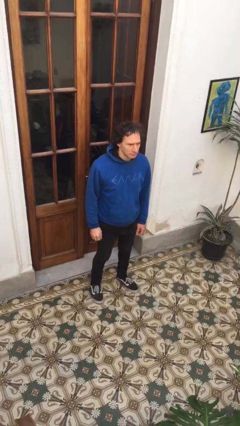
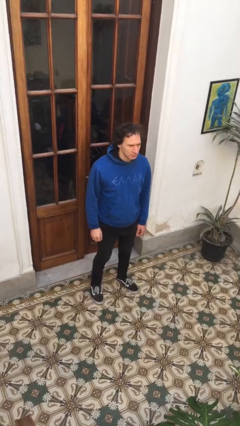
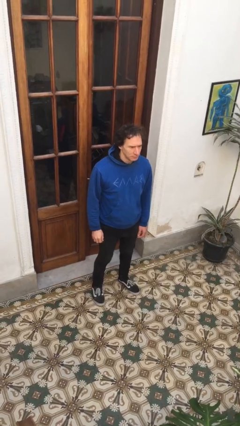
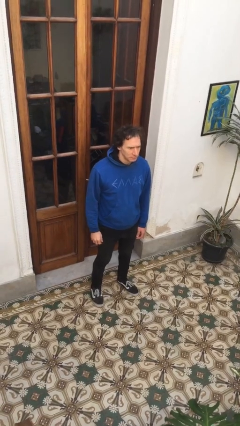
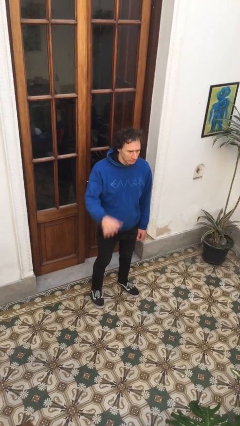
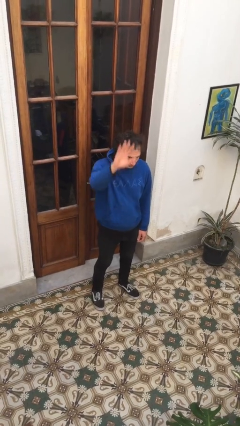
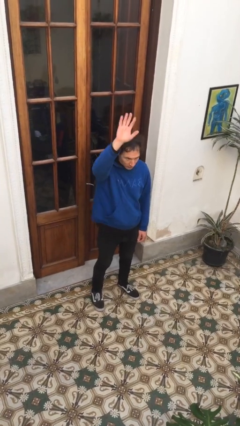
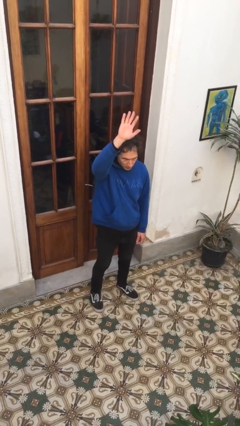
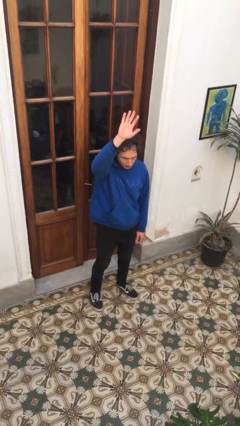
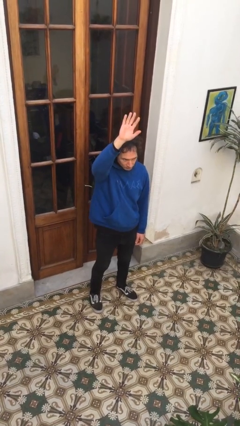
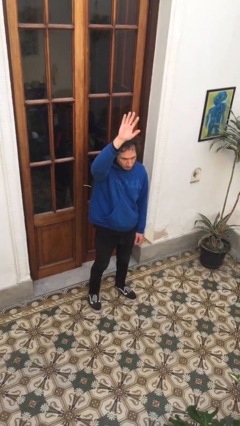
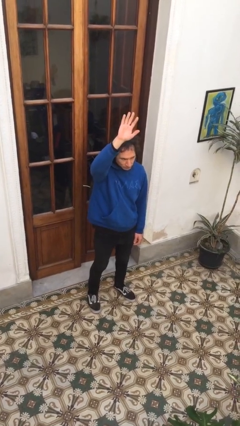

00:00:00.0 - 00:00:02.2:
person gestures raise hand

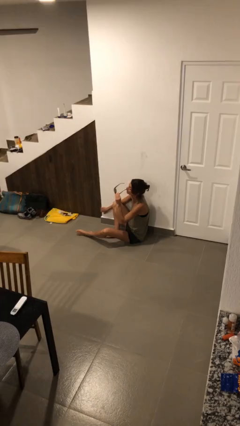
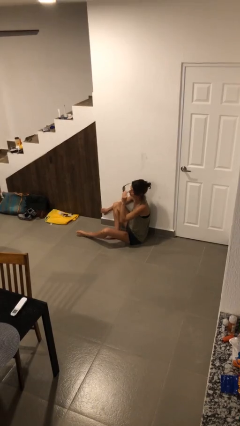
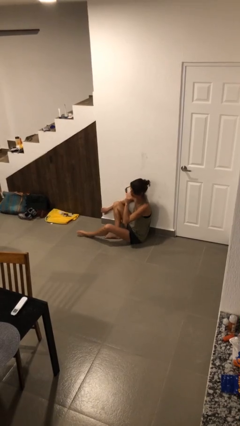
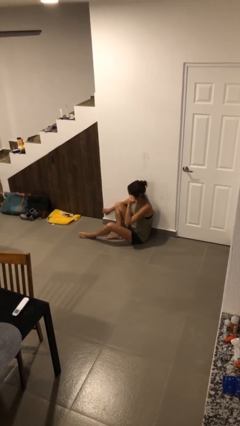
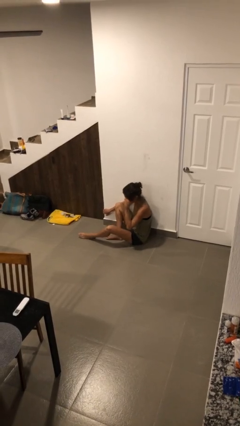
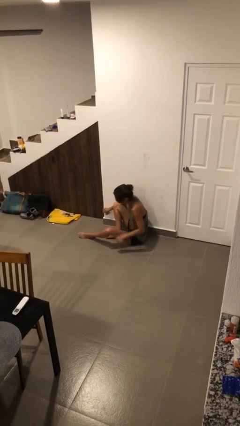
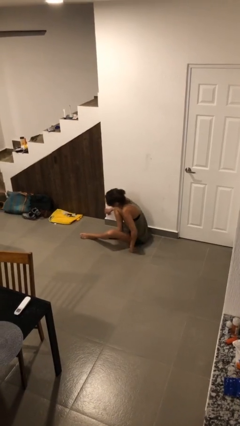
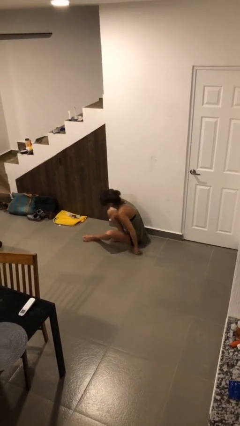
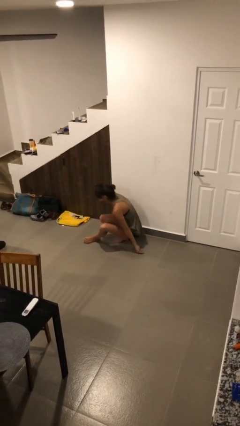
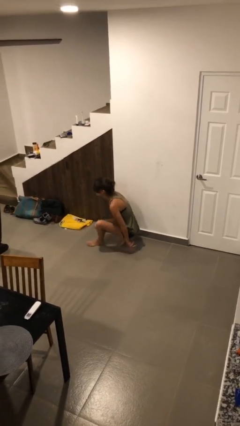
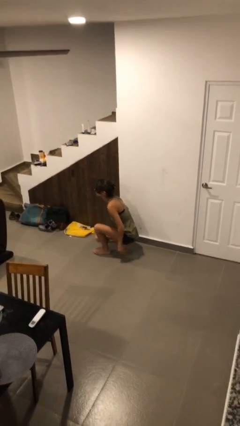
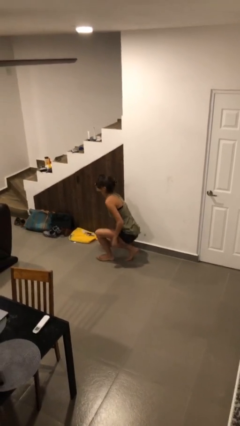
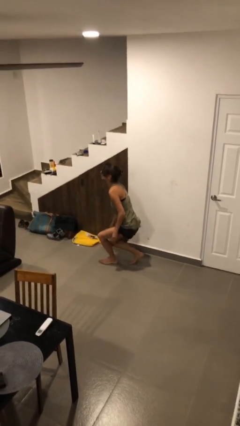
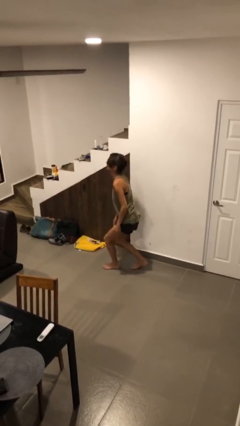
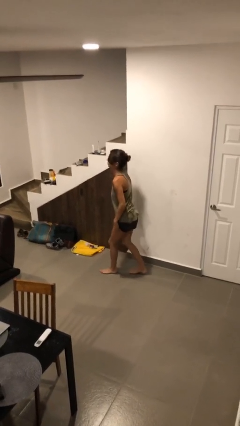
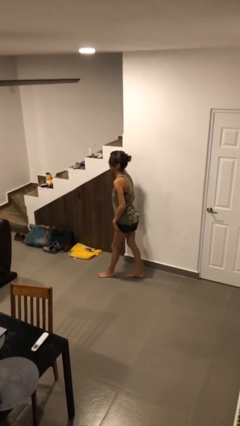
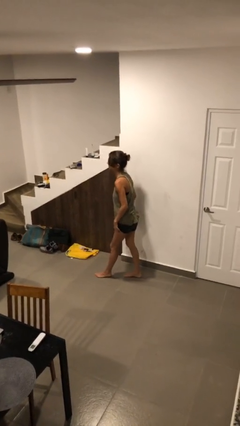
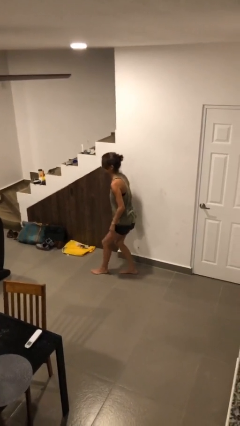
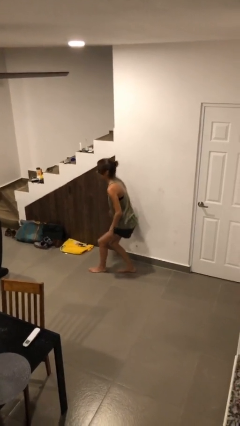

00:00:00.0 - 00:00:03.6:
person stands up

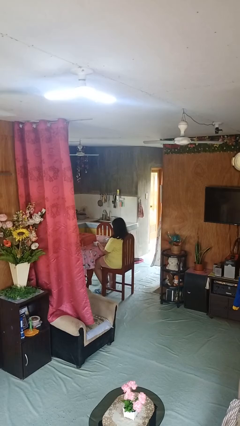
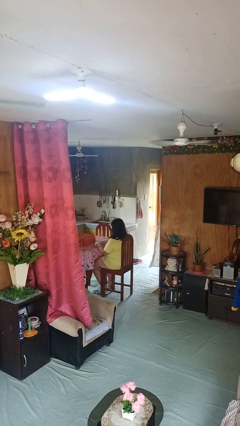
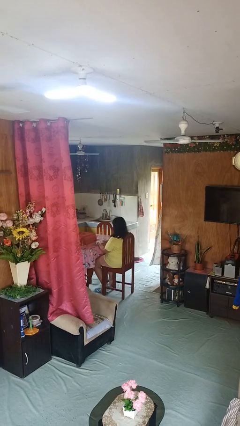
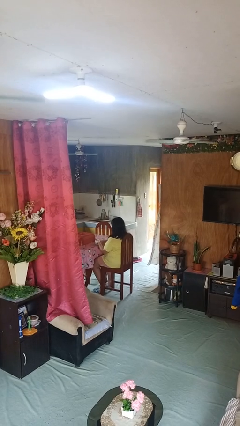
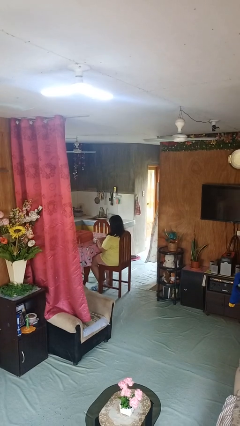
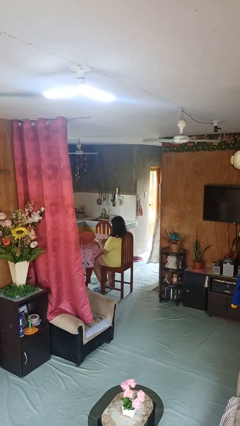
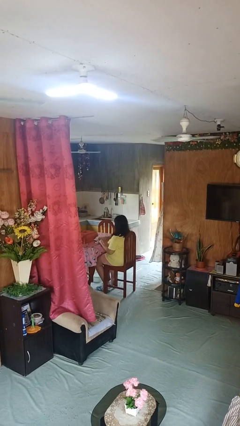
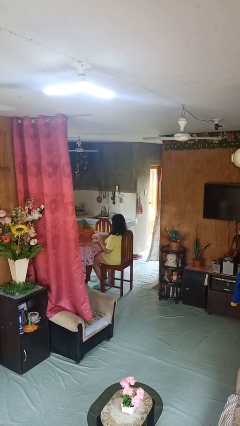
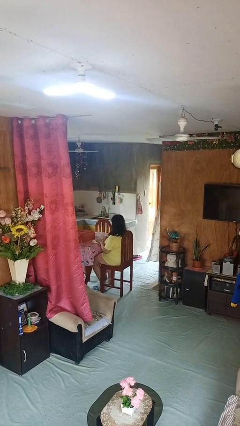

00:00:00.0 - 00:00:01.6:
person takes off gloves

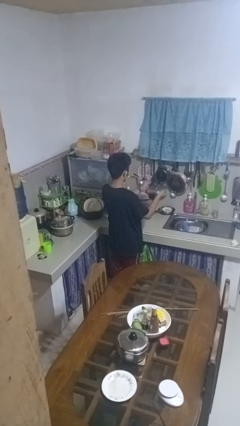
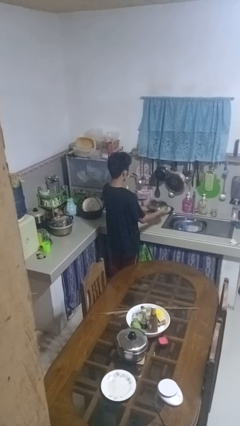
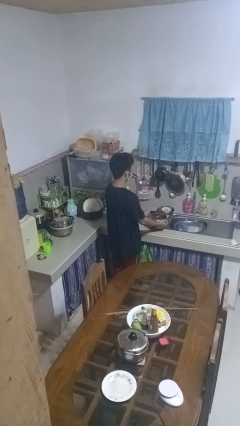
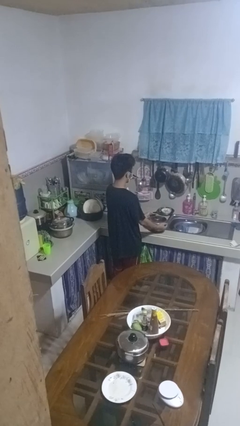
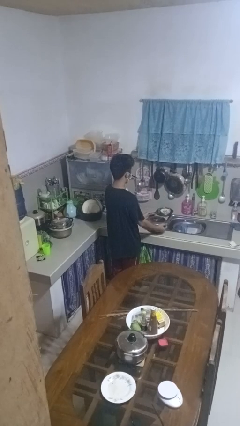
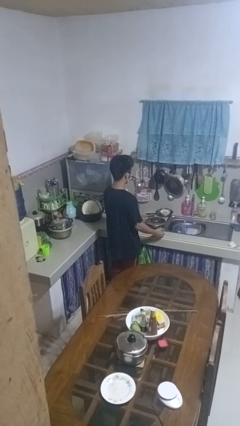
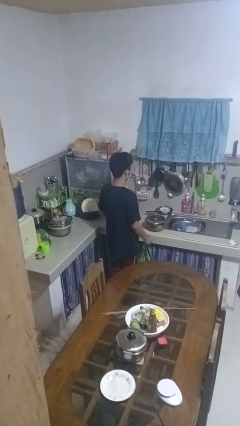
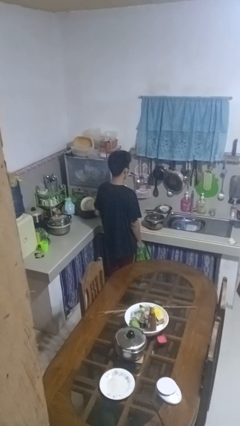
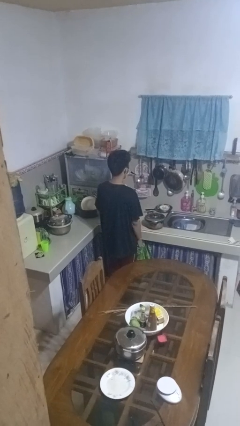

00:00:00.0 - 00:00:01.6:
person puts down object on countertop

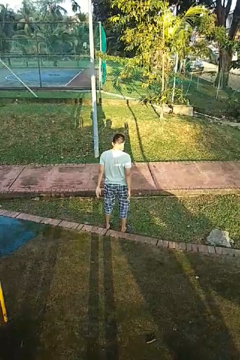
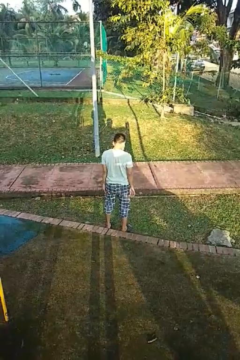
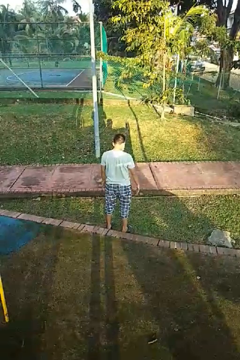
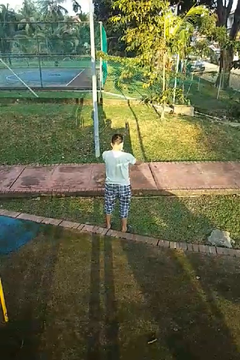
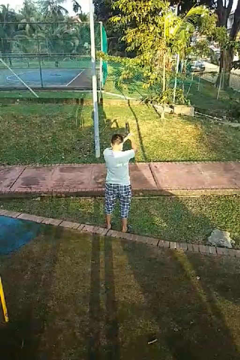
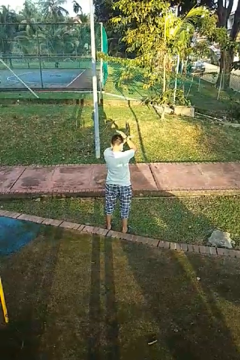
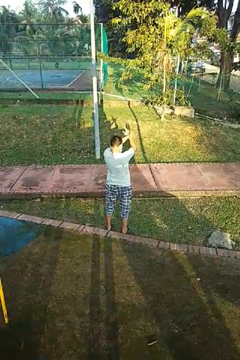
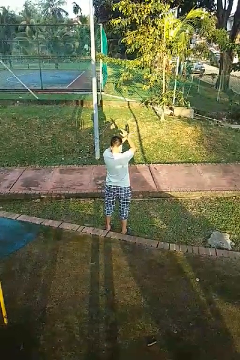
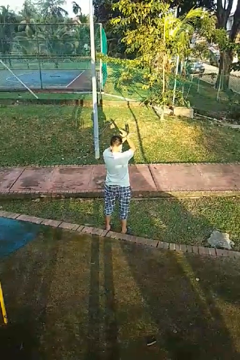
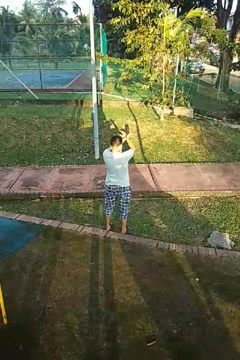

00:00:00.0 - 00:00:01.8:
person gestures arms x

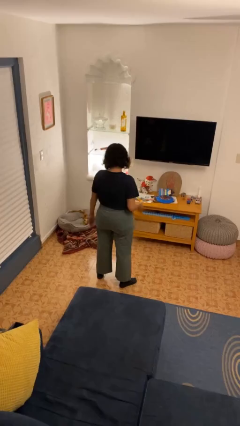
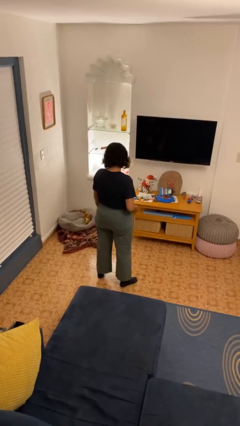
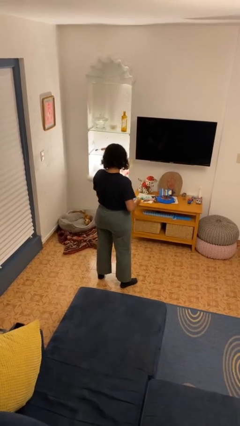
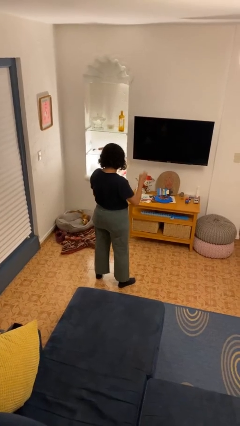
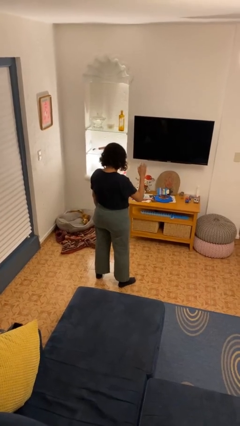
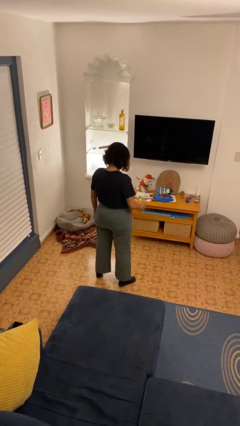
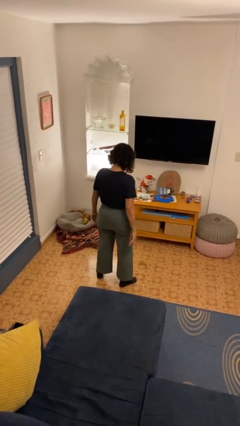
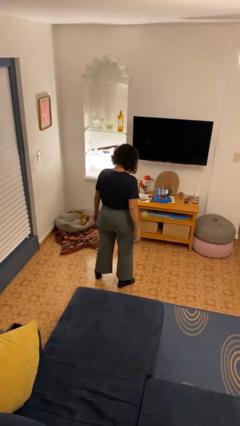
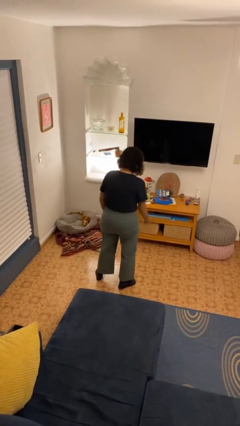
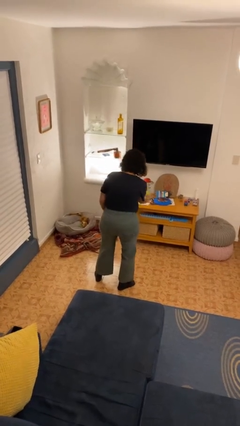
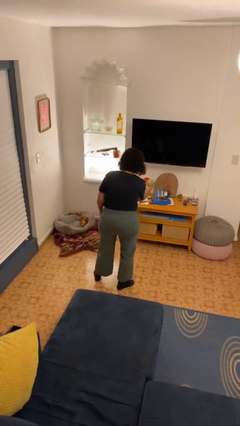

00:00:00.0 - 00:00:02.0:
person bounces ball on floor

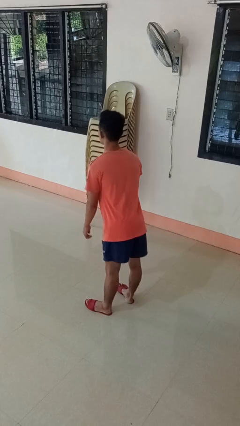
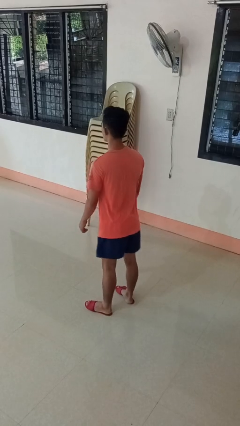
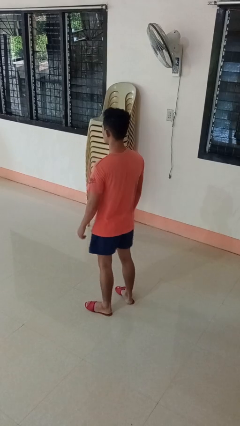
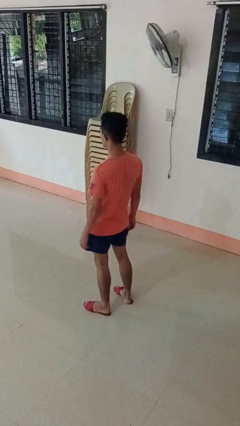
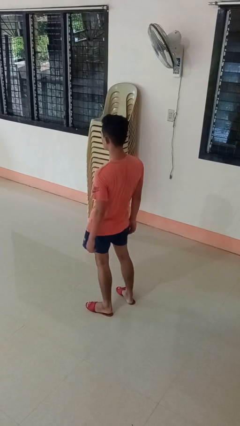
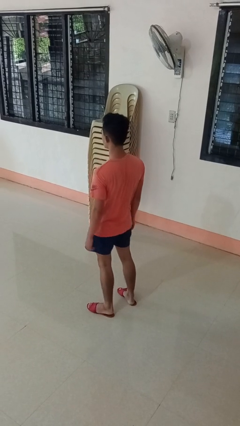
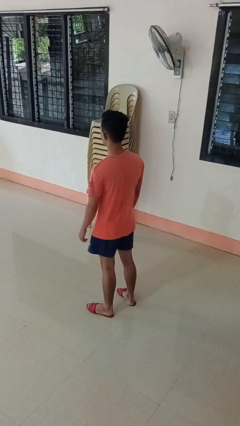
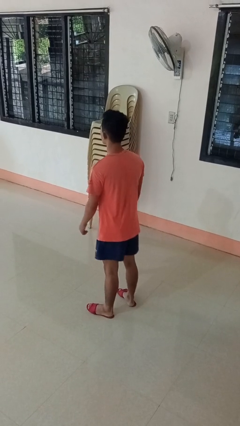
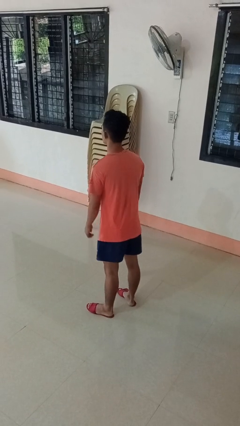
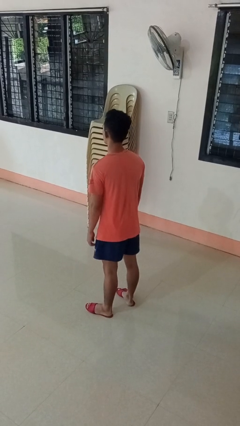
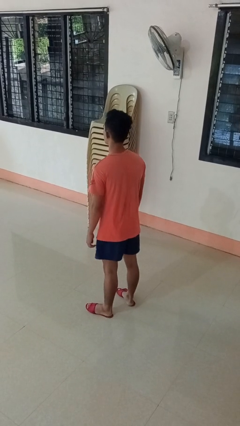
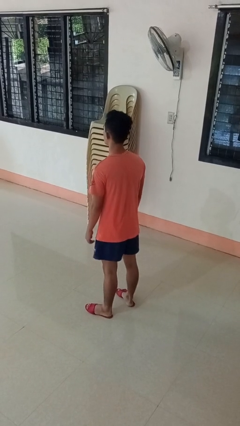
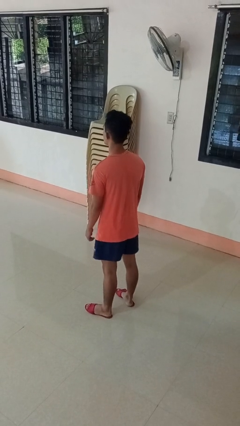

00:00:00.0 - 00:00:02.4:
person wiggles hips

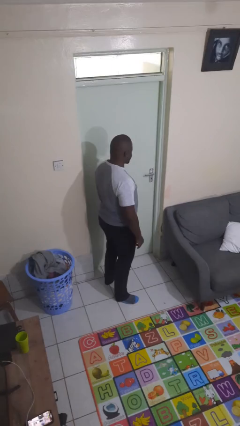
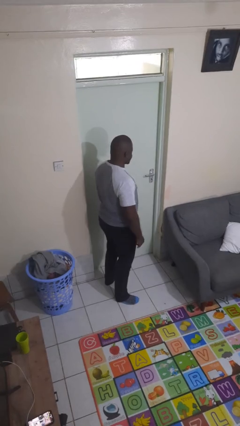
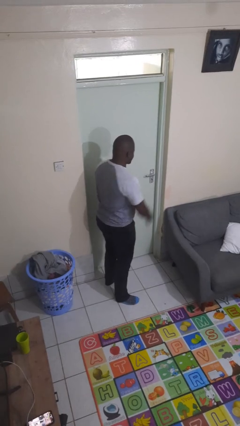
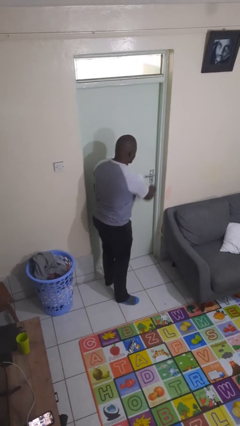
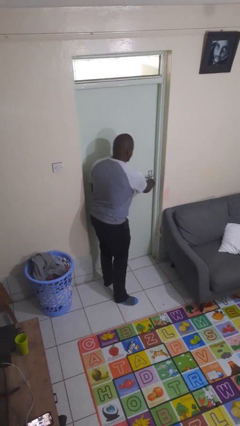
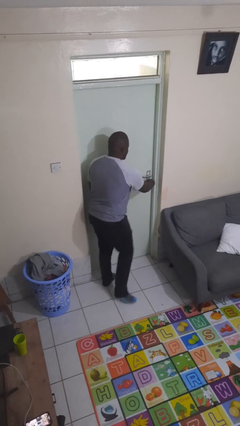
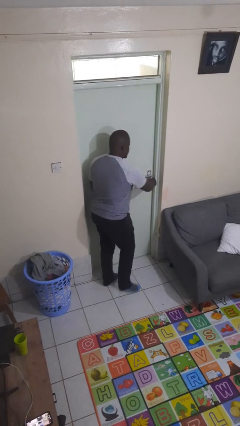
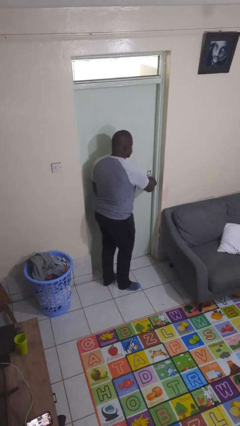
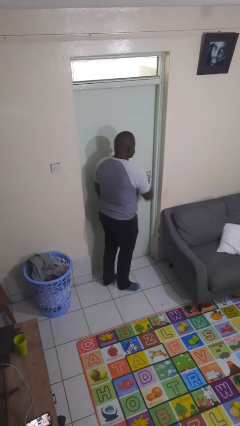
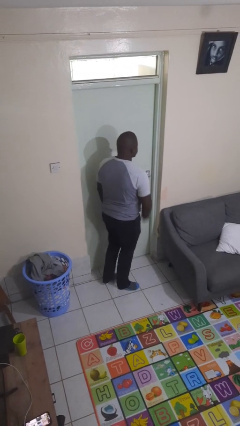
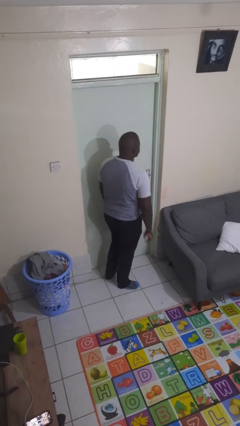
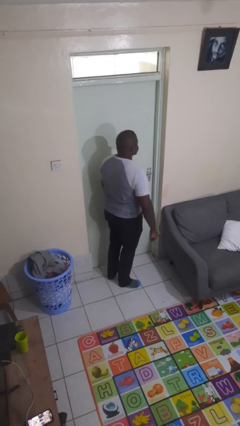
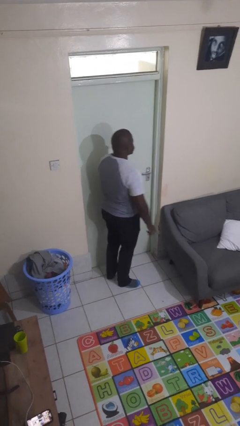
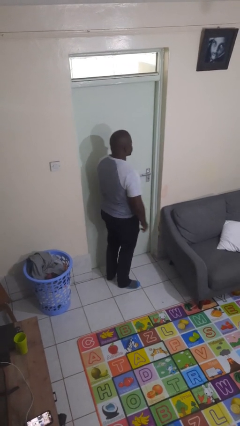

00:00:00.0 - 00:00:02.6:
person unlocks door with keys
